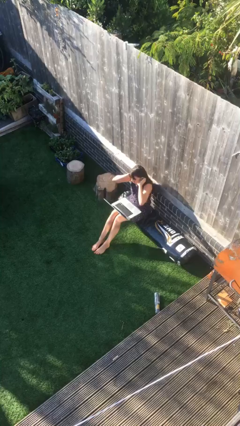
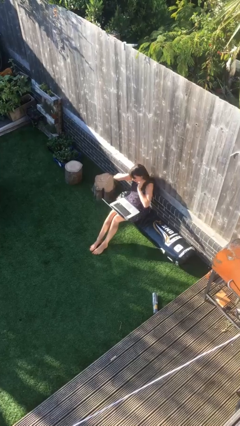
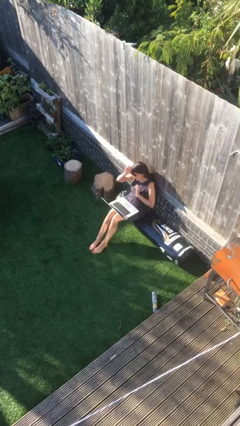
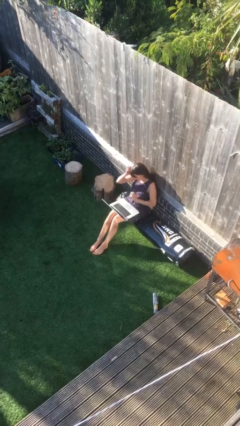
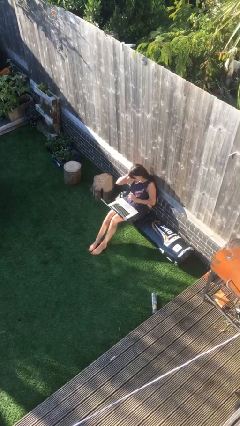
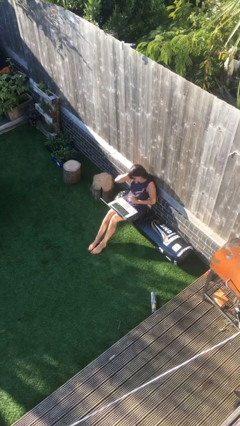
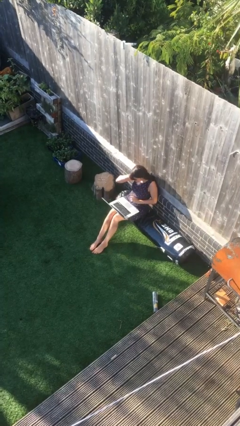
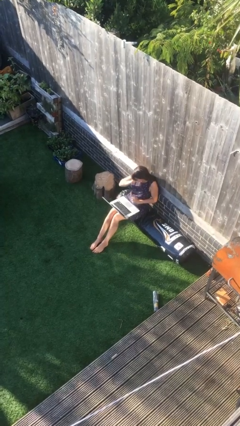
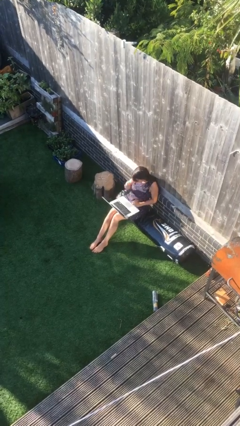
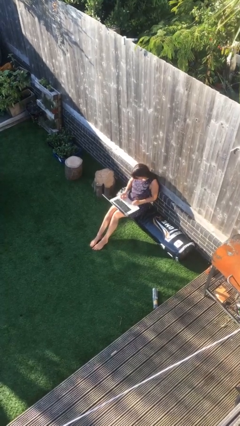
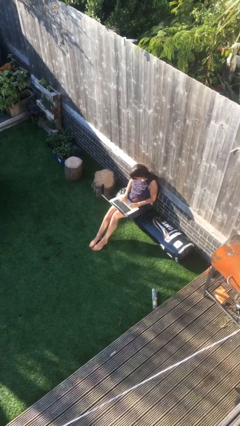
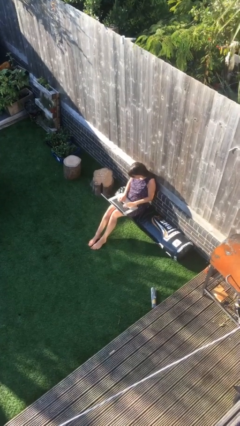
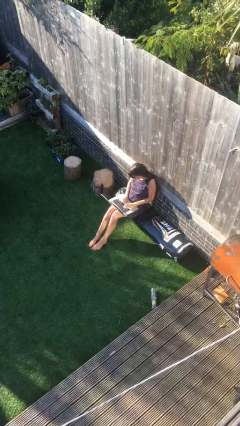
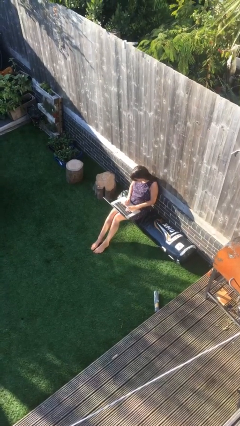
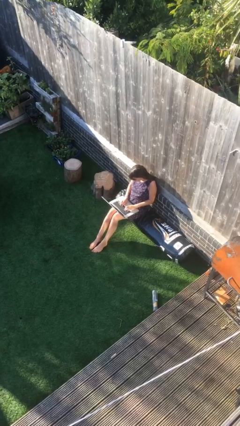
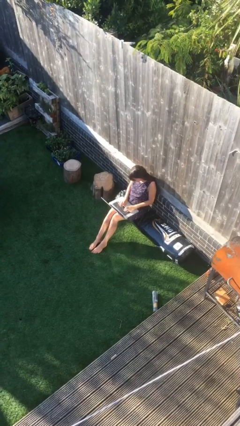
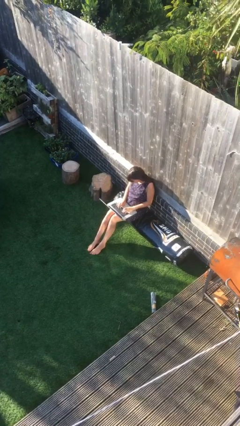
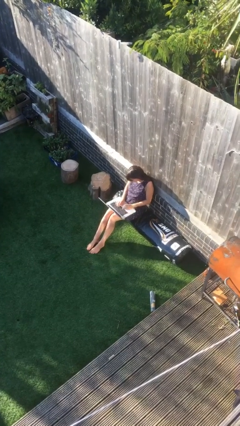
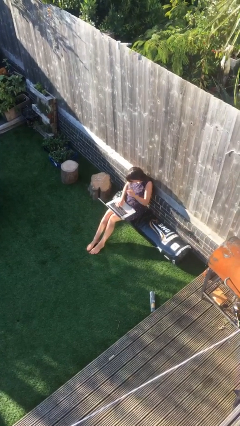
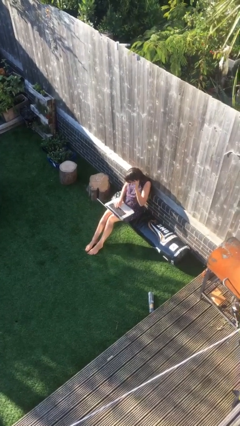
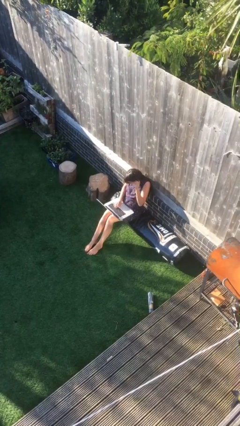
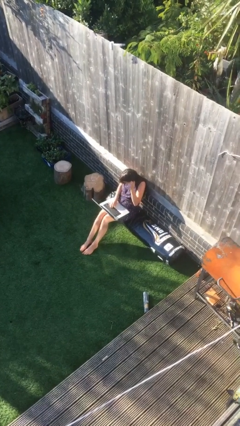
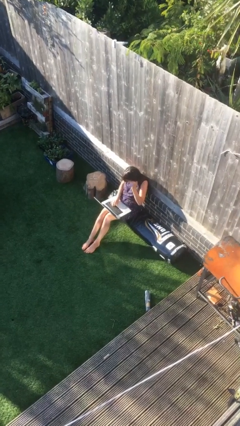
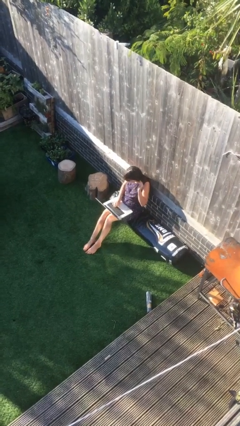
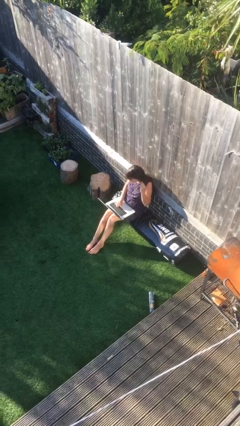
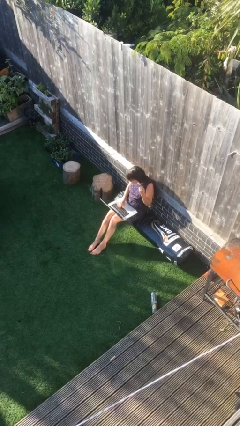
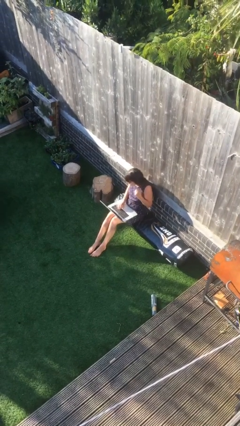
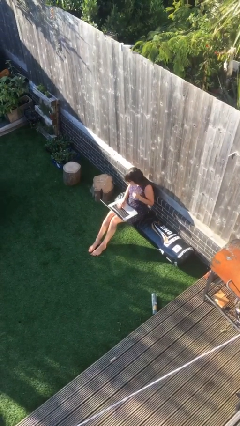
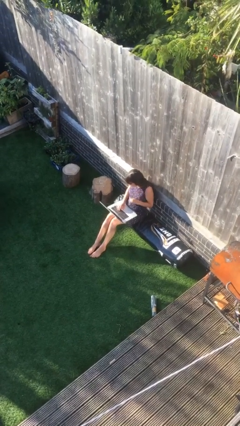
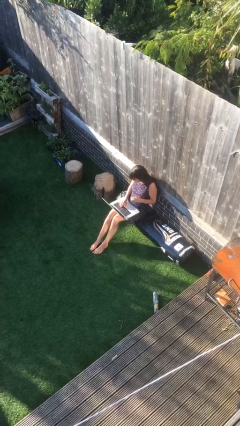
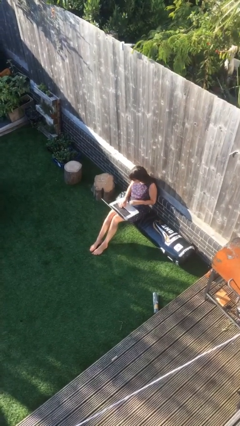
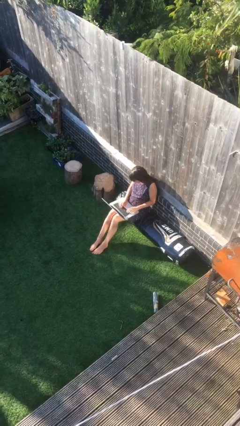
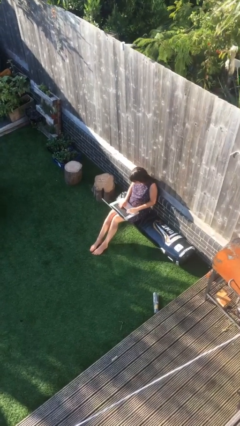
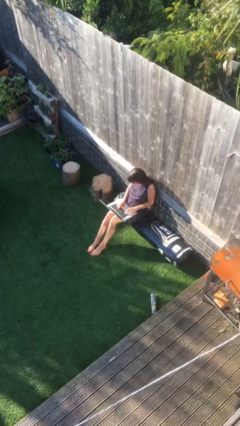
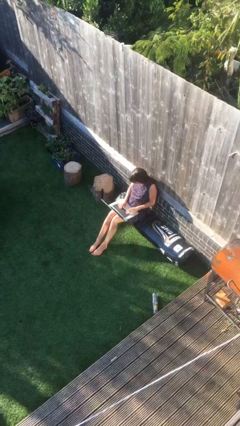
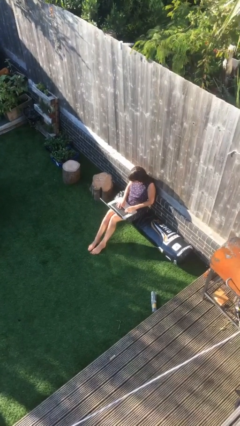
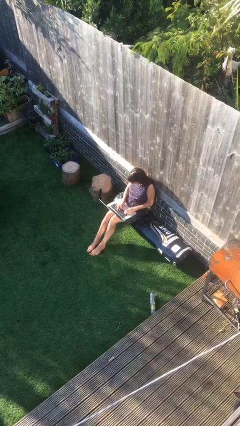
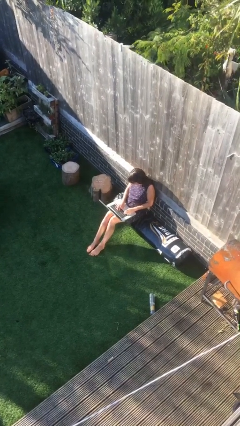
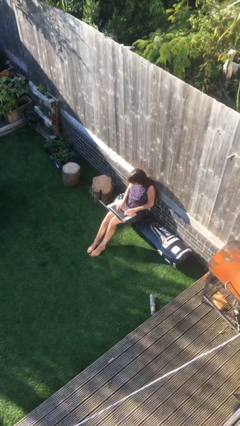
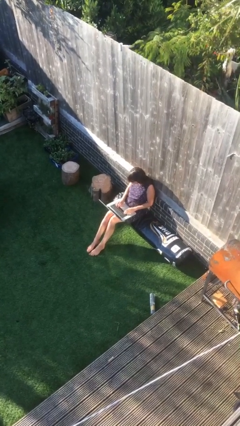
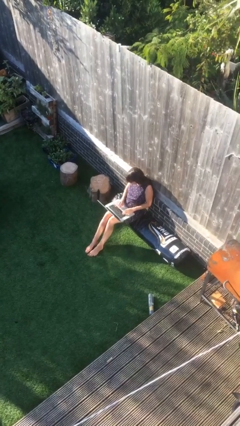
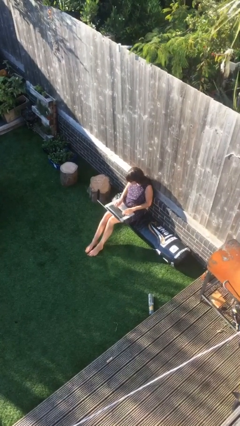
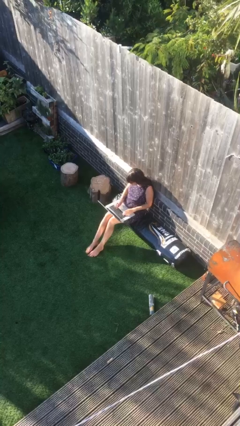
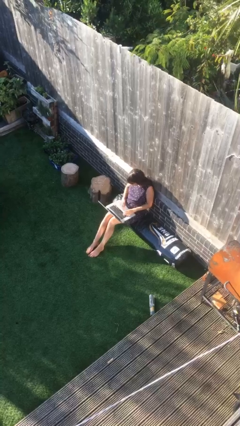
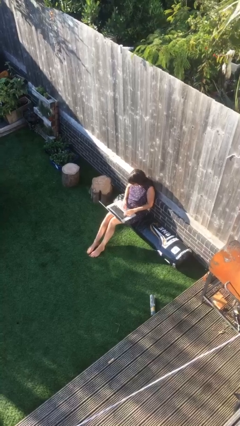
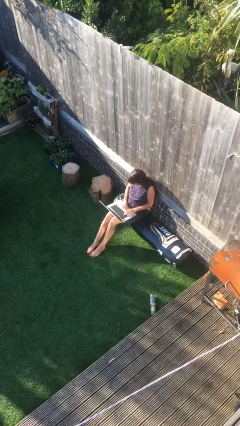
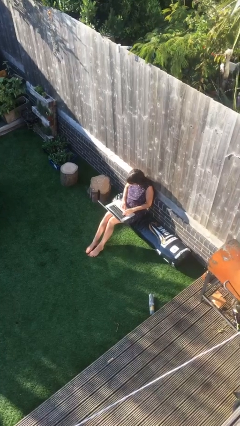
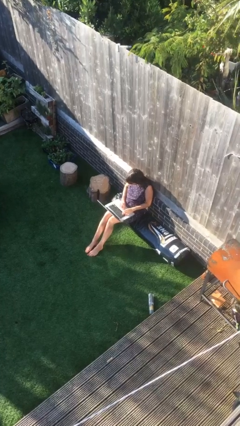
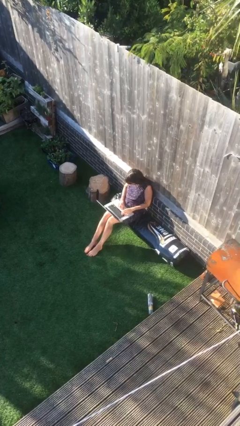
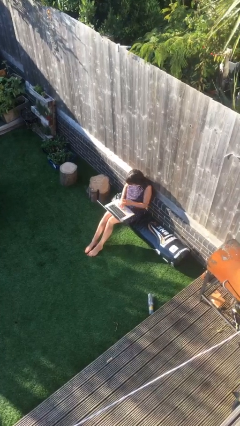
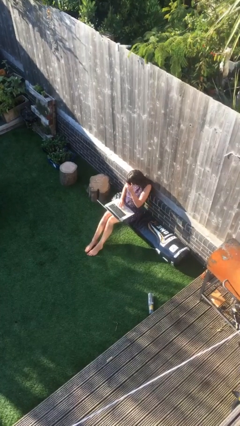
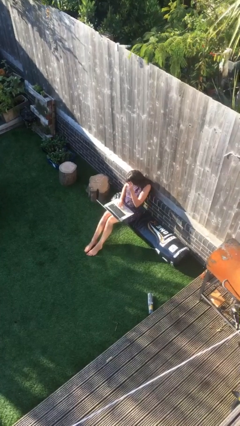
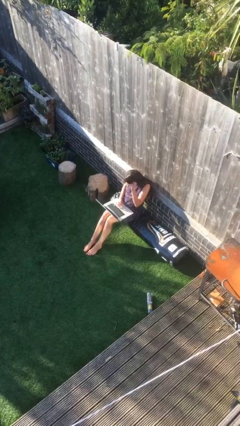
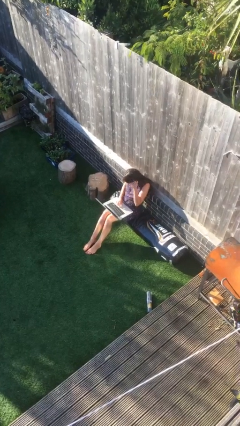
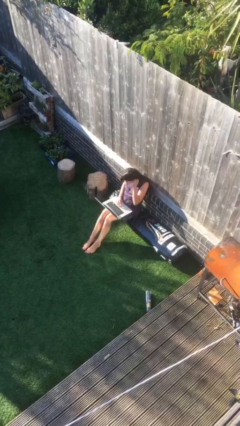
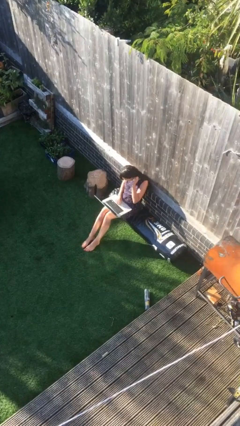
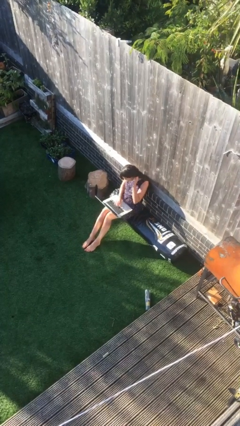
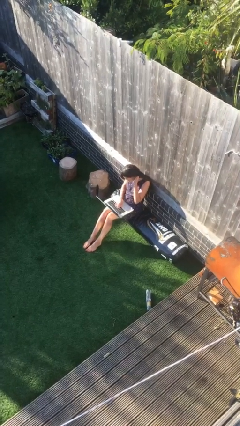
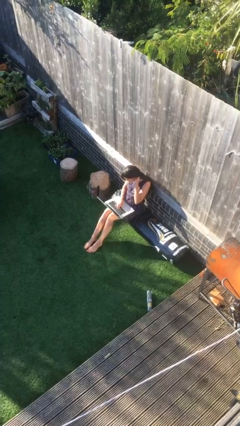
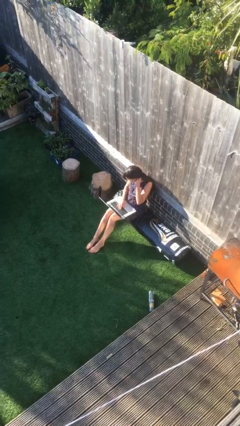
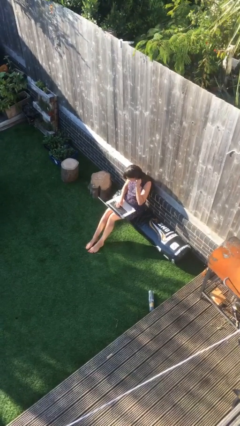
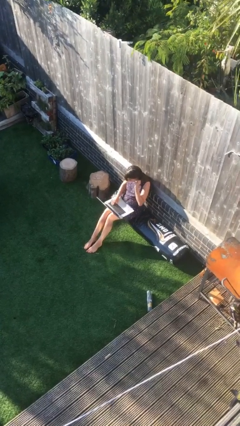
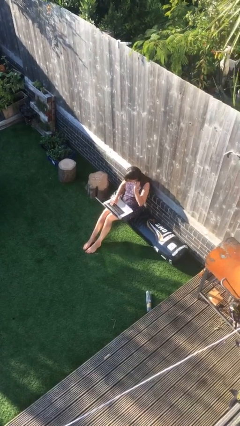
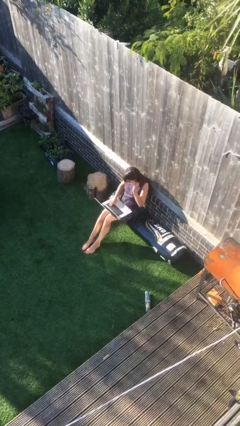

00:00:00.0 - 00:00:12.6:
person interacts with laptop

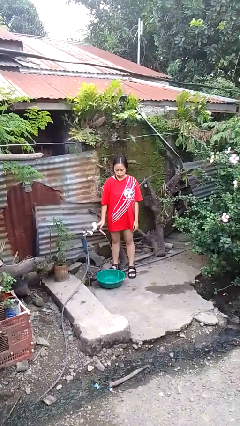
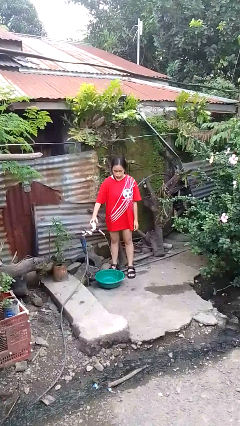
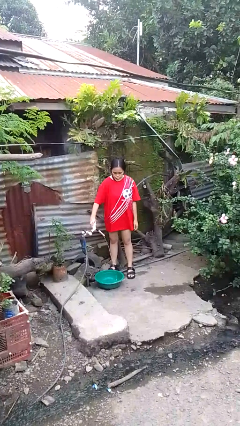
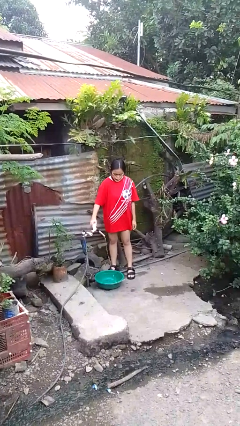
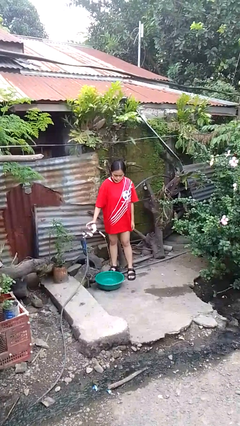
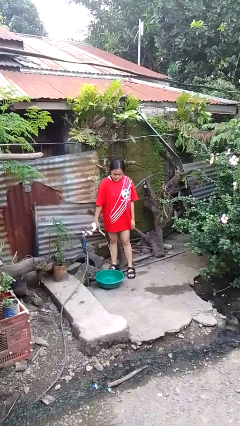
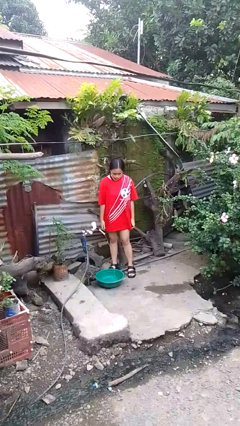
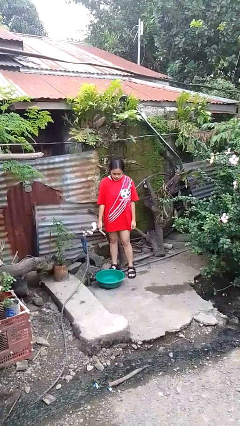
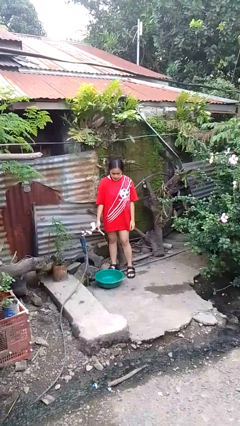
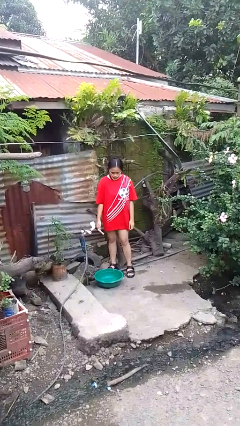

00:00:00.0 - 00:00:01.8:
person turns off faucet

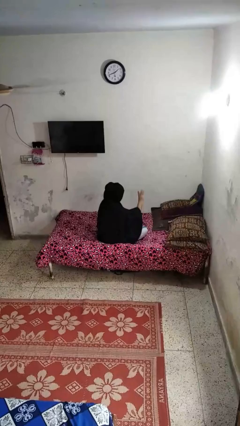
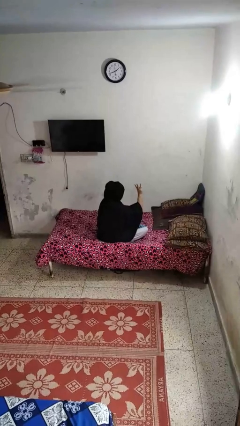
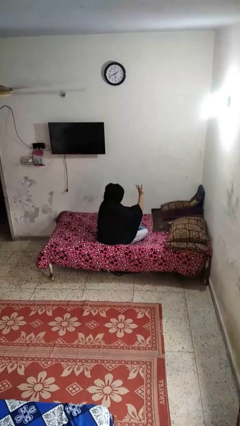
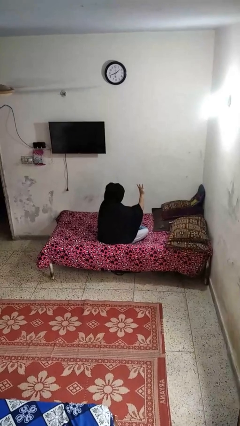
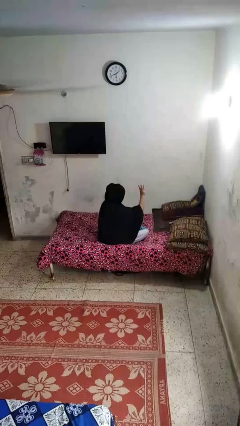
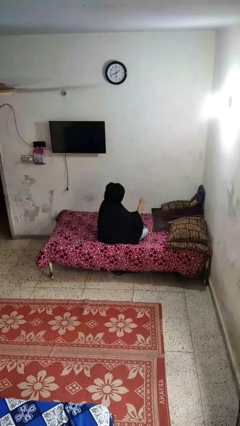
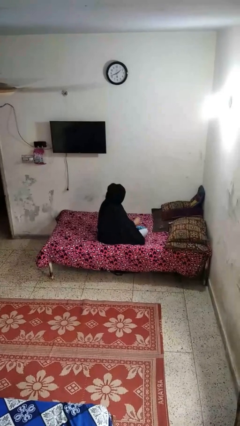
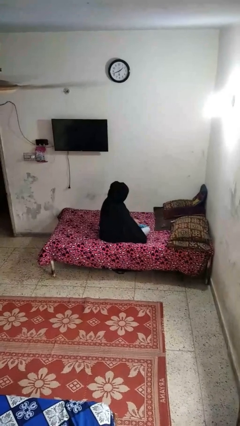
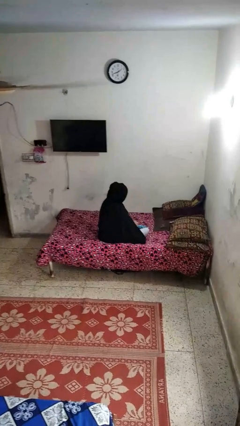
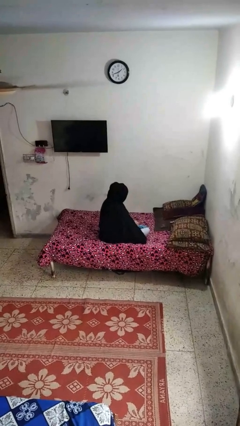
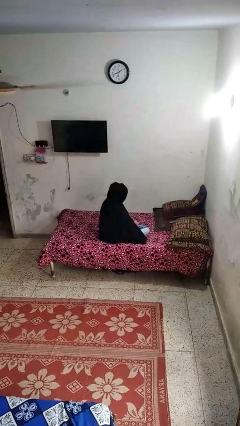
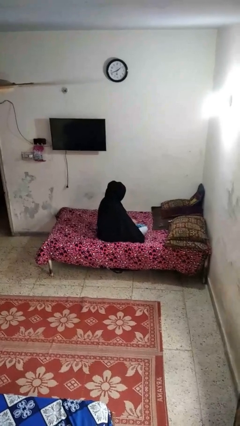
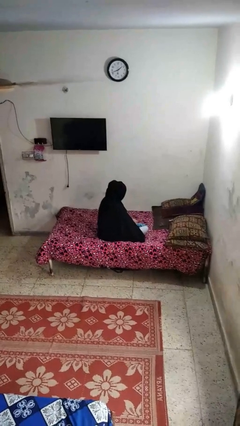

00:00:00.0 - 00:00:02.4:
person gestures number three

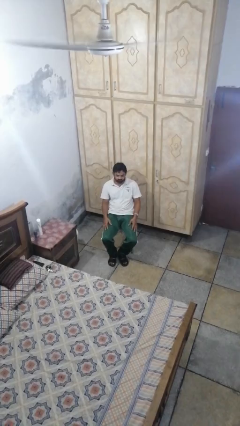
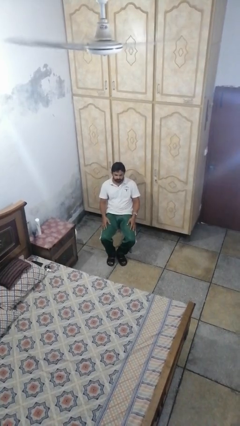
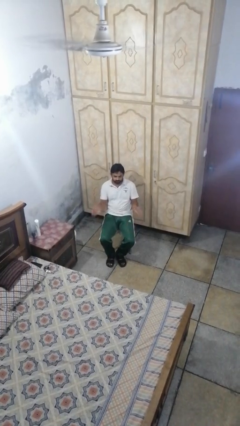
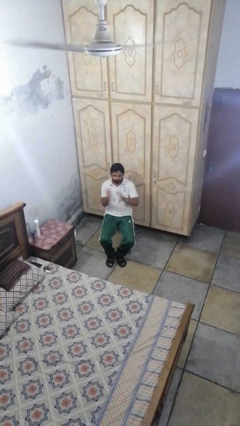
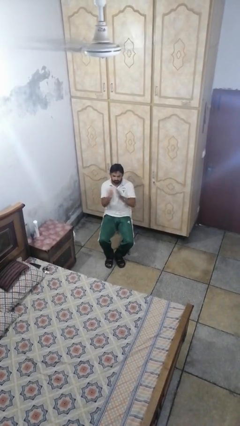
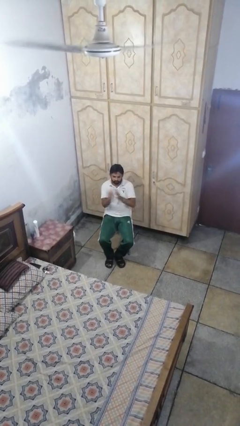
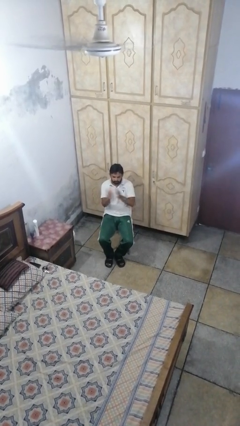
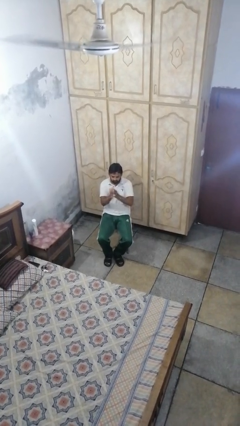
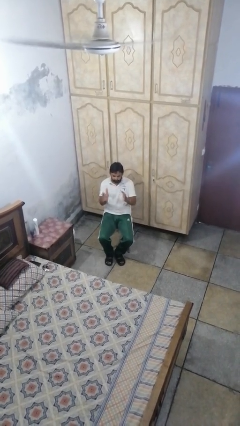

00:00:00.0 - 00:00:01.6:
person claps hands
